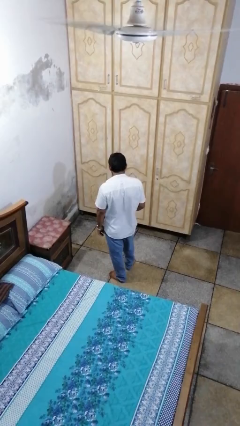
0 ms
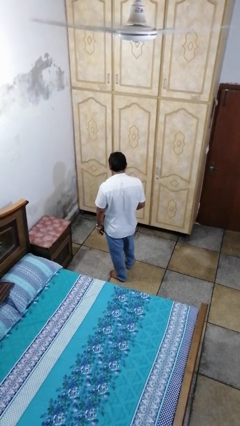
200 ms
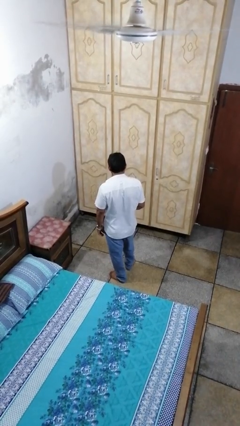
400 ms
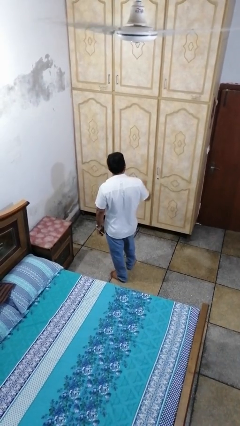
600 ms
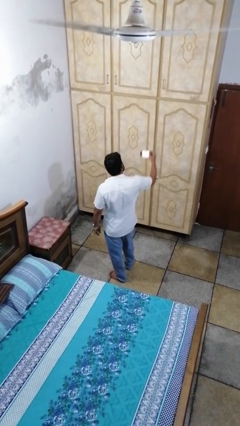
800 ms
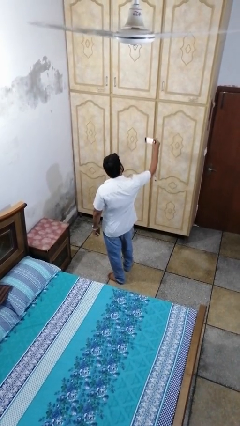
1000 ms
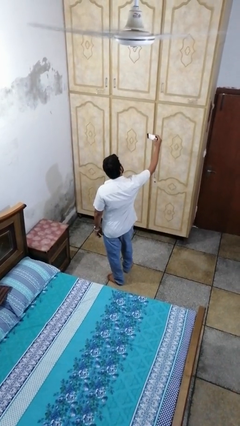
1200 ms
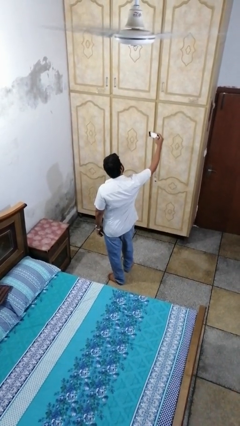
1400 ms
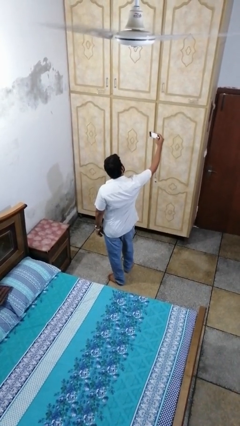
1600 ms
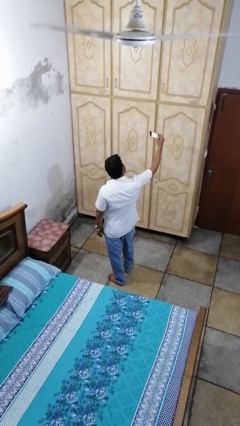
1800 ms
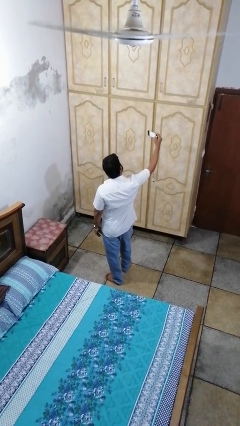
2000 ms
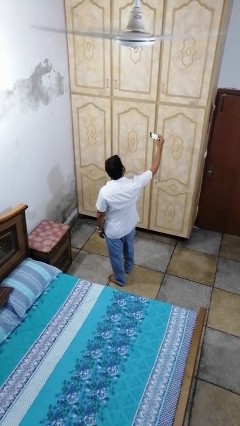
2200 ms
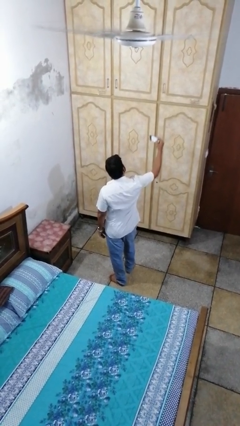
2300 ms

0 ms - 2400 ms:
person takes selfie

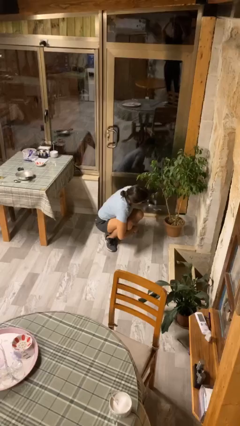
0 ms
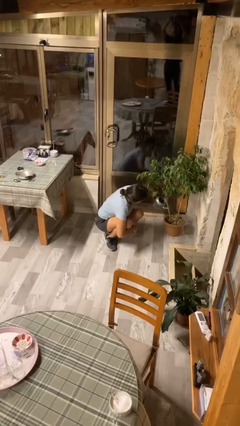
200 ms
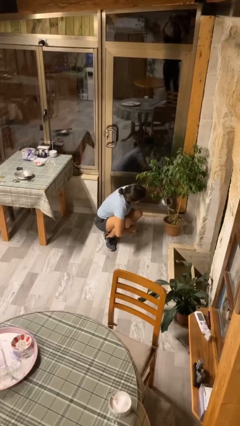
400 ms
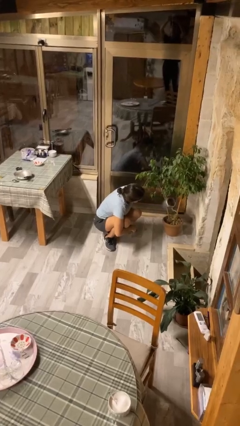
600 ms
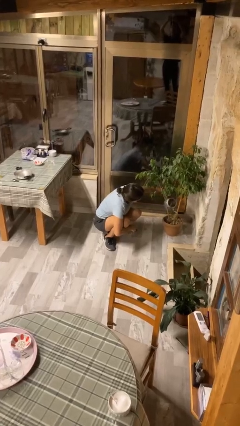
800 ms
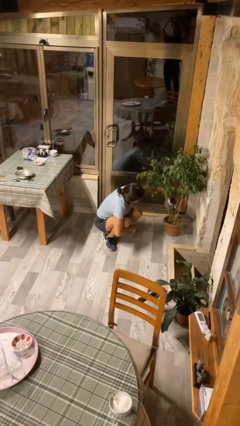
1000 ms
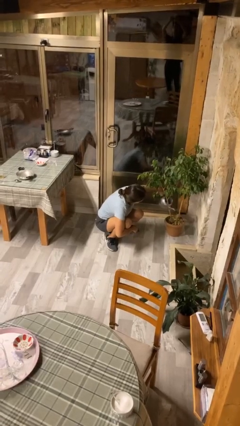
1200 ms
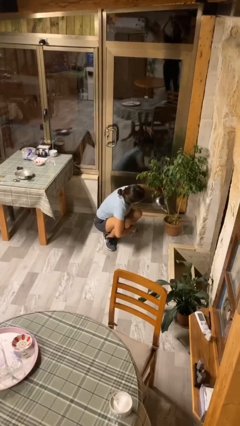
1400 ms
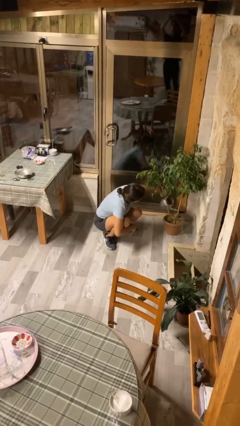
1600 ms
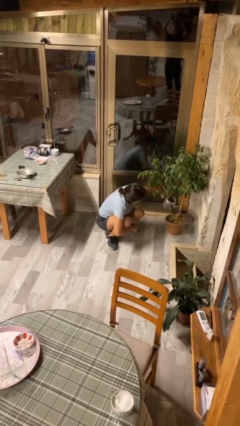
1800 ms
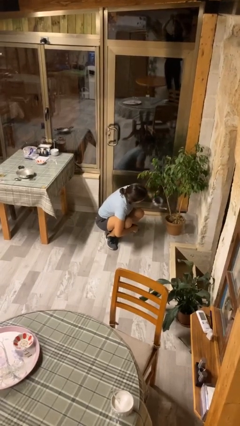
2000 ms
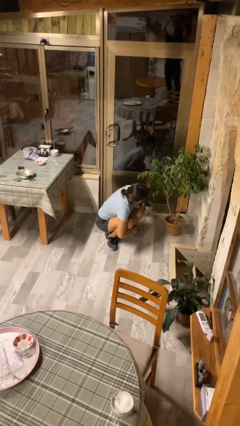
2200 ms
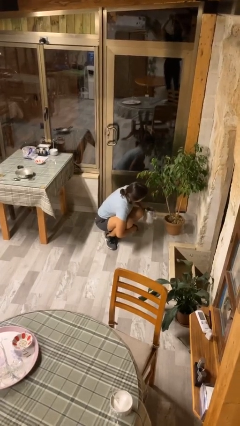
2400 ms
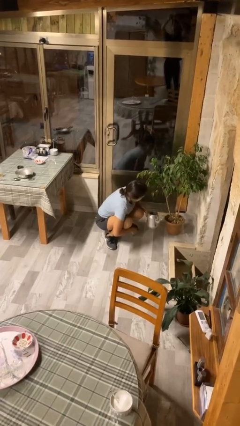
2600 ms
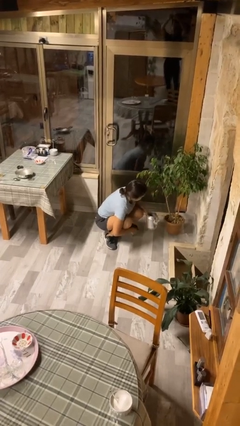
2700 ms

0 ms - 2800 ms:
person waters houseplant

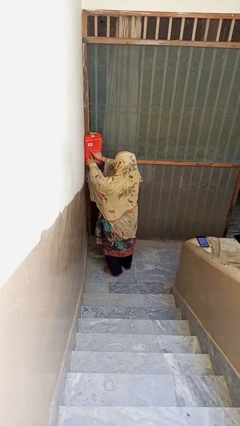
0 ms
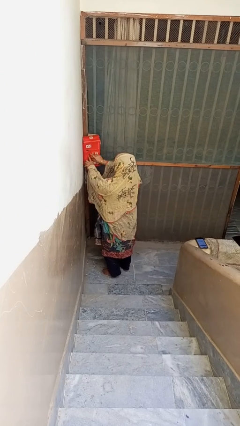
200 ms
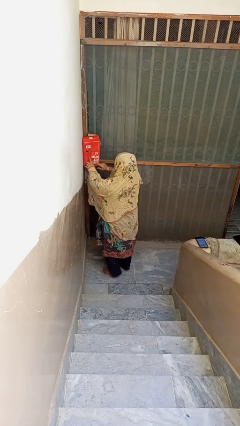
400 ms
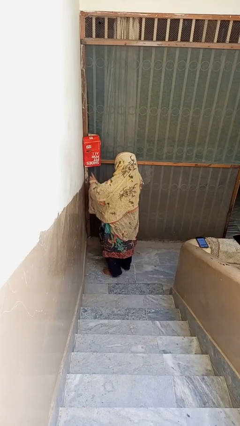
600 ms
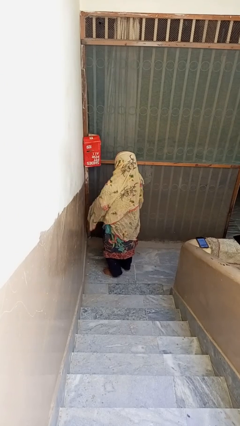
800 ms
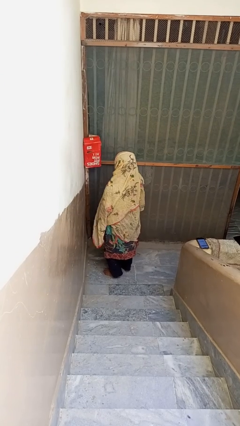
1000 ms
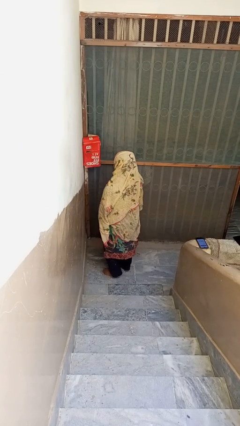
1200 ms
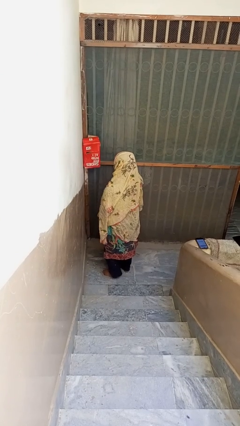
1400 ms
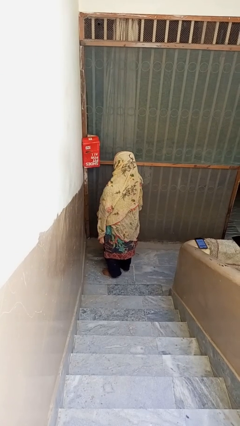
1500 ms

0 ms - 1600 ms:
person closes mailbox

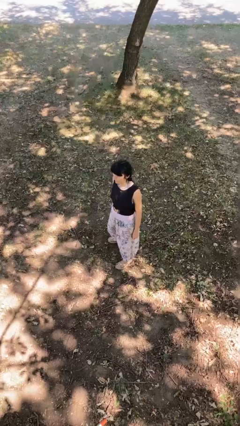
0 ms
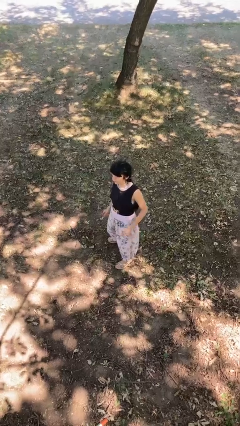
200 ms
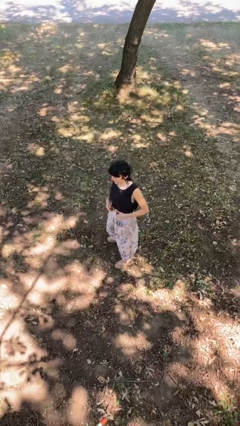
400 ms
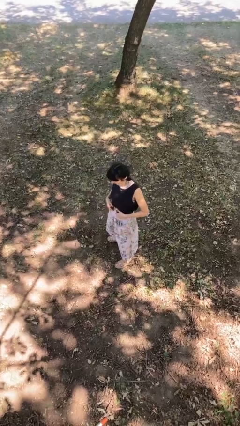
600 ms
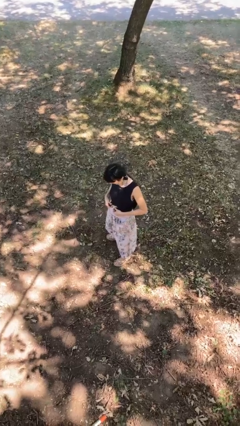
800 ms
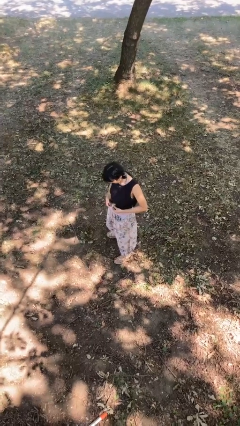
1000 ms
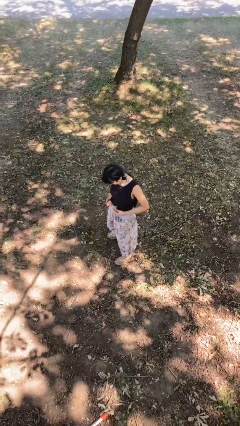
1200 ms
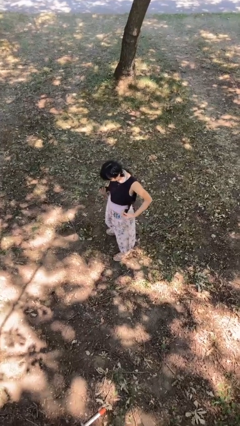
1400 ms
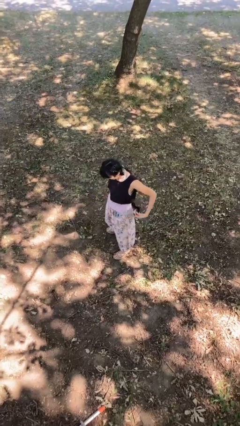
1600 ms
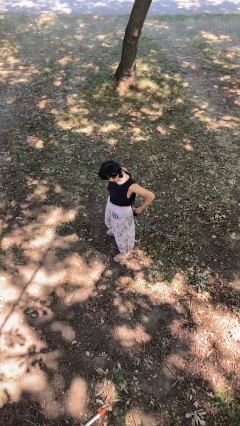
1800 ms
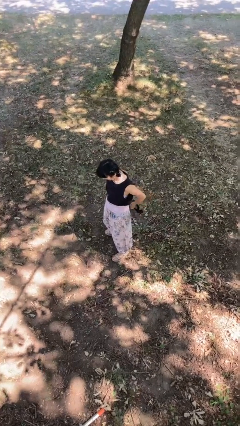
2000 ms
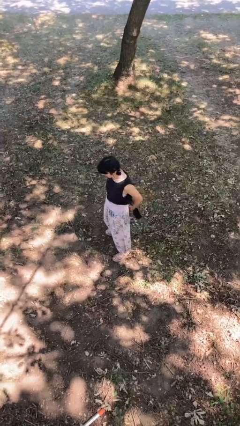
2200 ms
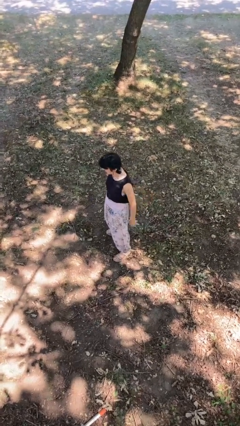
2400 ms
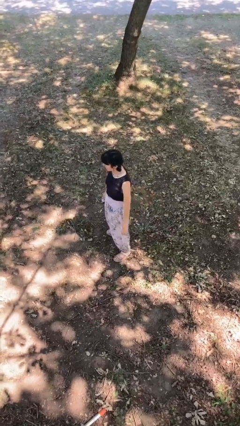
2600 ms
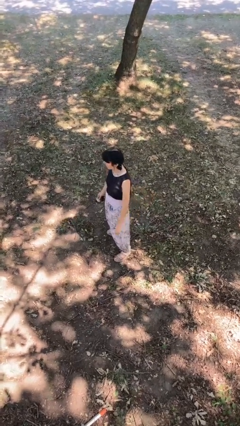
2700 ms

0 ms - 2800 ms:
person takes off belt

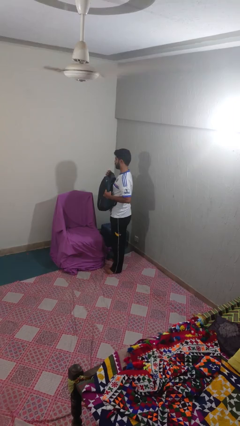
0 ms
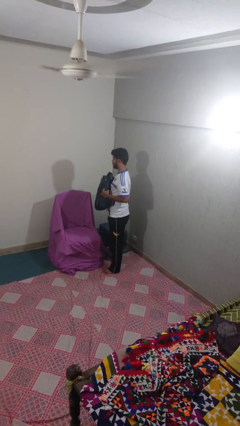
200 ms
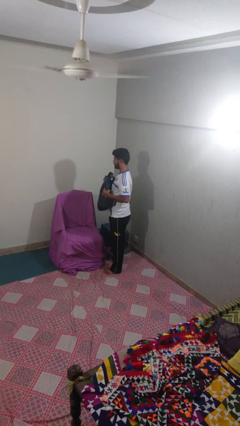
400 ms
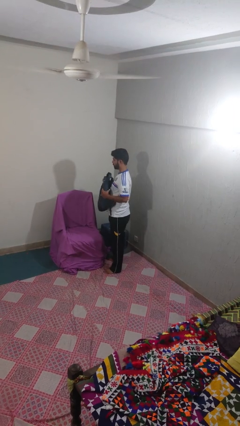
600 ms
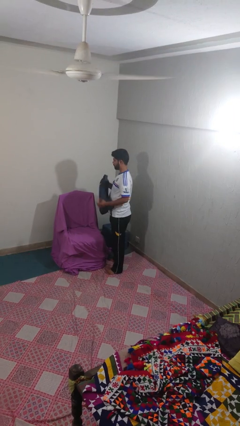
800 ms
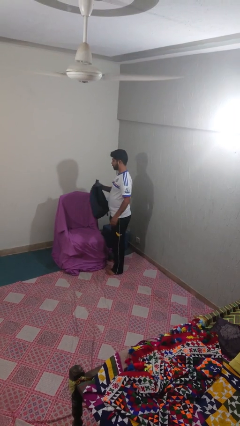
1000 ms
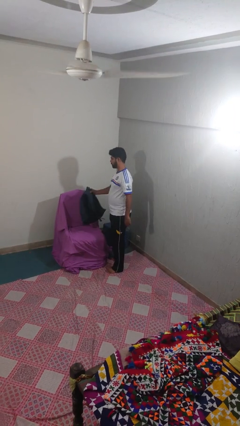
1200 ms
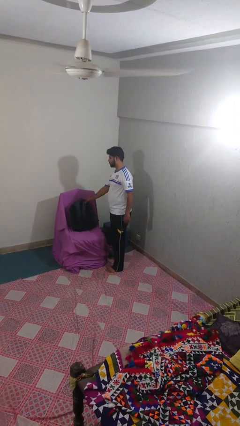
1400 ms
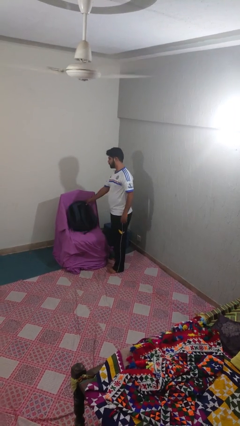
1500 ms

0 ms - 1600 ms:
person puts down object on couch

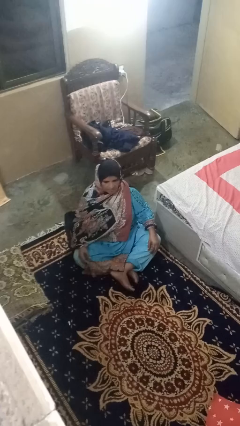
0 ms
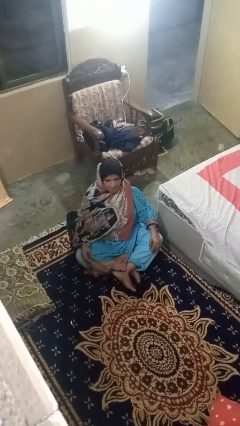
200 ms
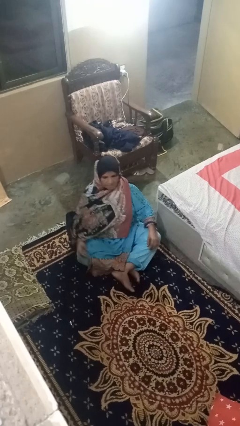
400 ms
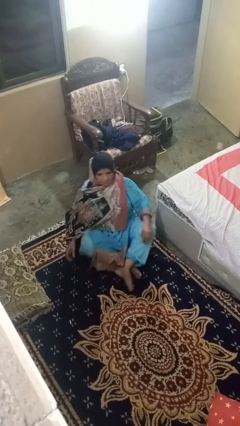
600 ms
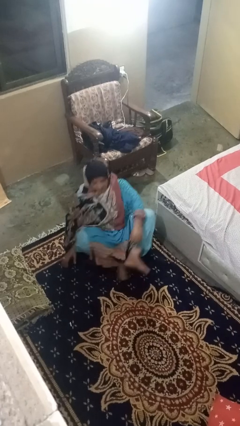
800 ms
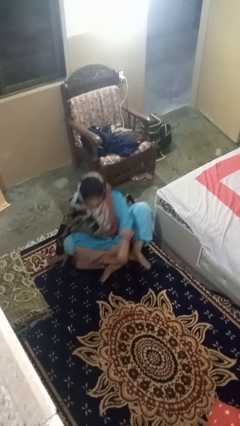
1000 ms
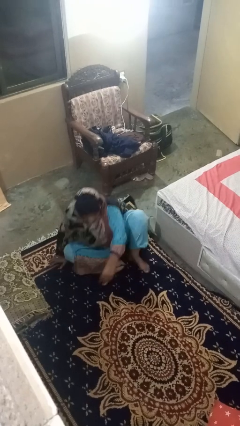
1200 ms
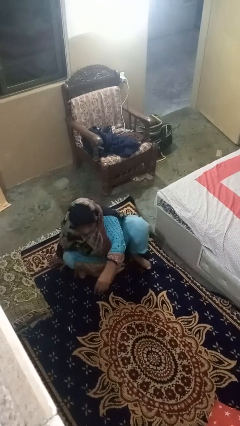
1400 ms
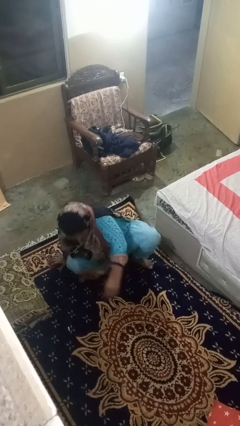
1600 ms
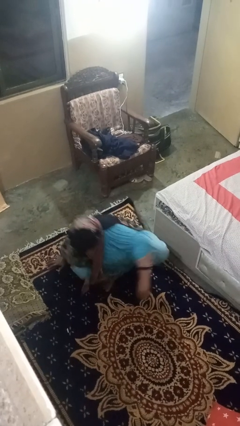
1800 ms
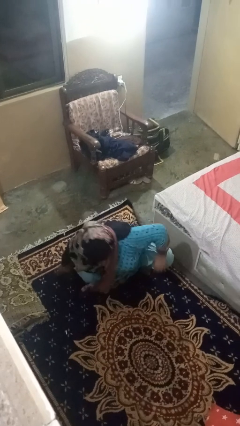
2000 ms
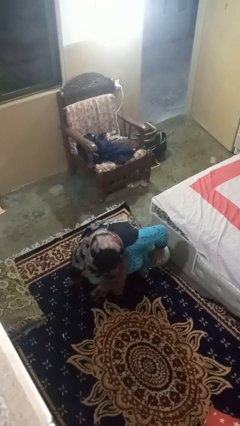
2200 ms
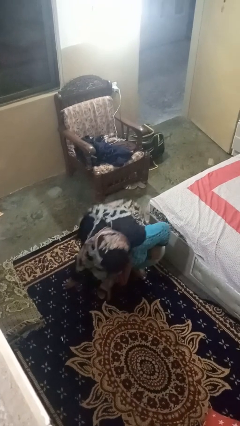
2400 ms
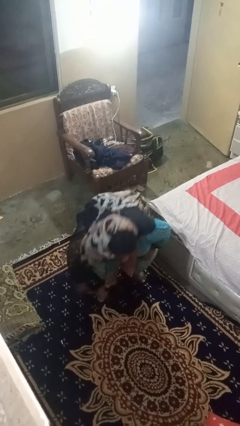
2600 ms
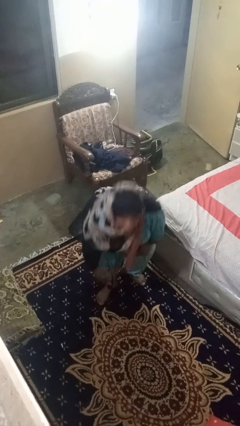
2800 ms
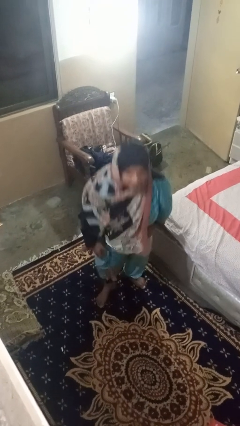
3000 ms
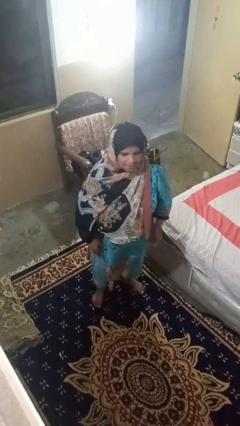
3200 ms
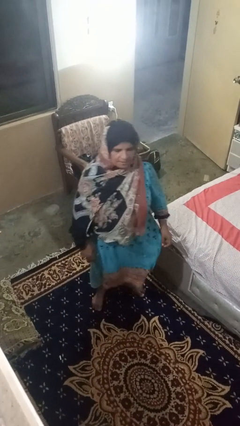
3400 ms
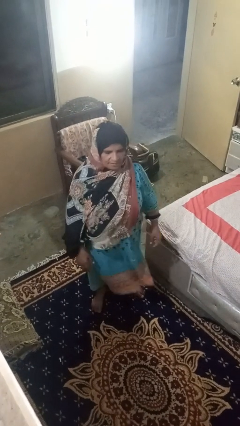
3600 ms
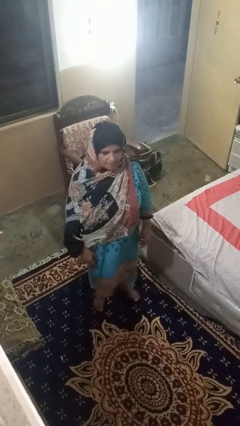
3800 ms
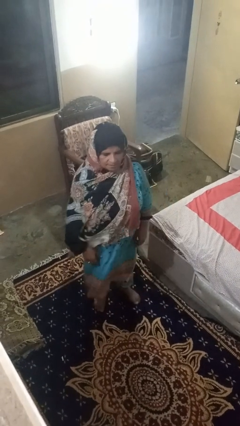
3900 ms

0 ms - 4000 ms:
person stands up from floor

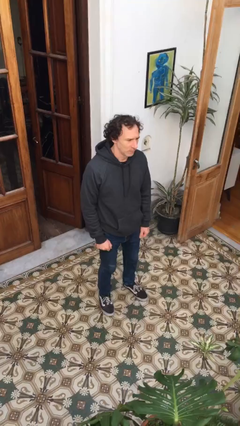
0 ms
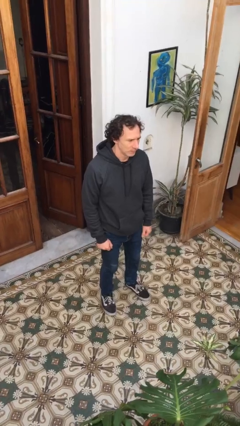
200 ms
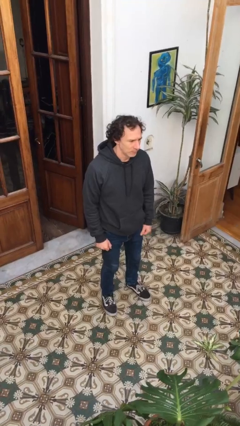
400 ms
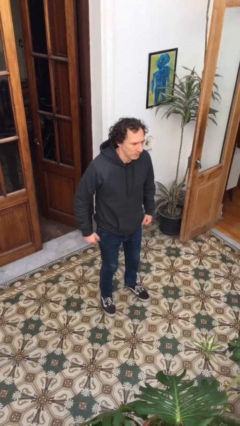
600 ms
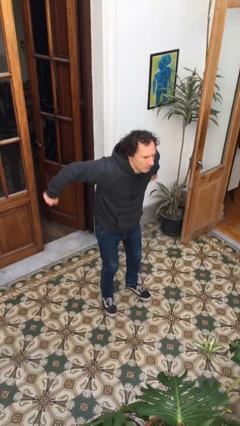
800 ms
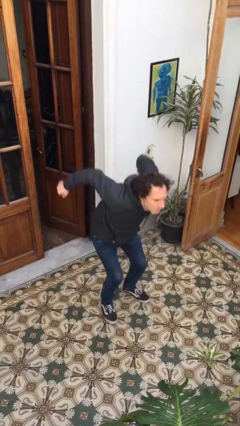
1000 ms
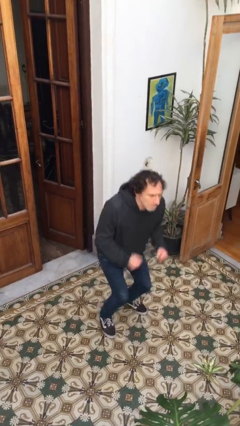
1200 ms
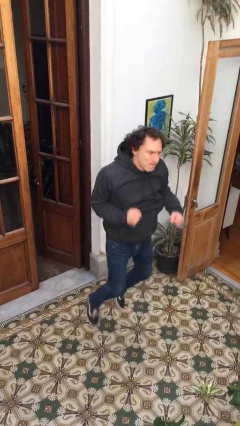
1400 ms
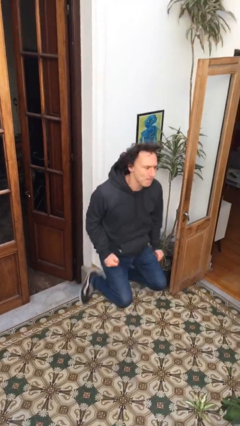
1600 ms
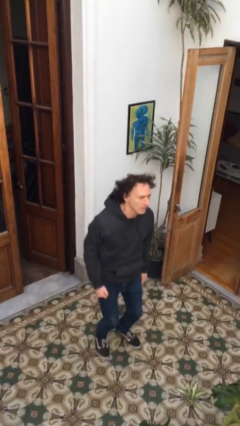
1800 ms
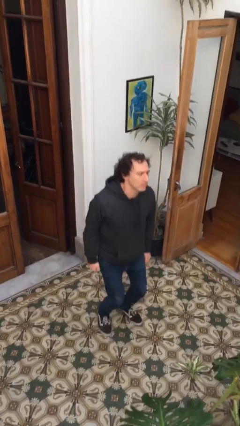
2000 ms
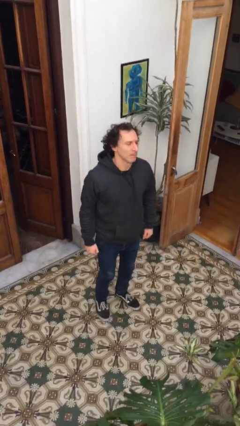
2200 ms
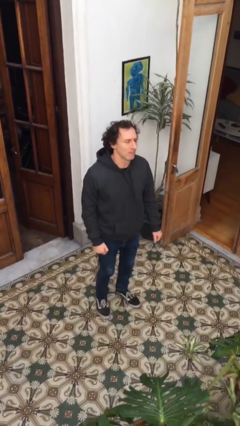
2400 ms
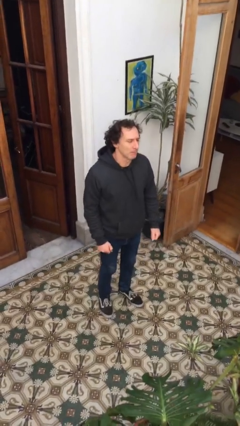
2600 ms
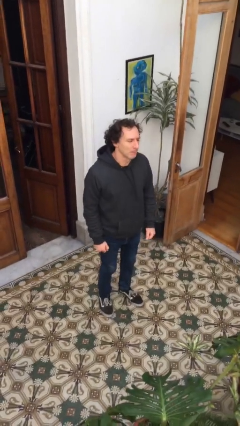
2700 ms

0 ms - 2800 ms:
person jumps
